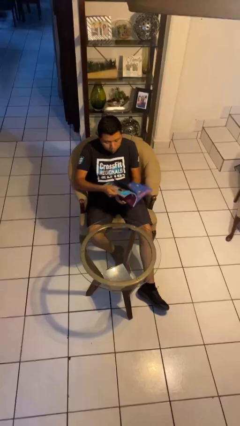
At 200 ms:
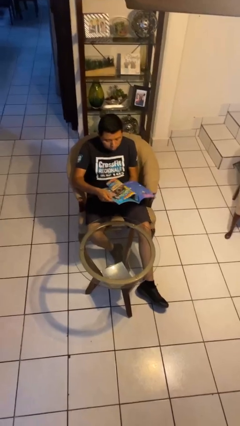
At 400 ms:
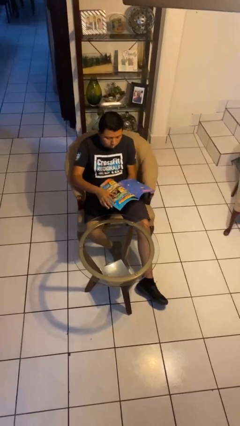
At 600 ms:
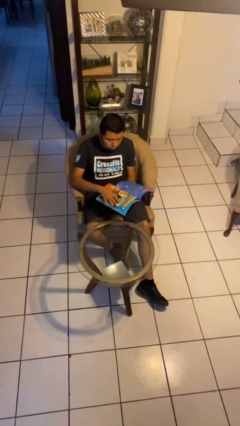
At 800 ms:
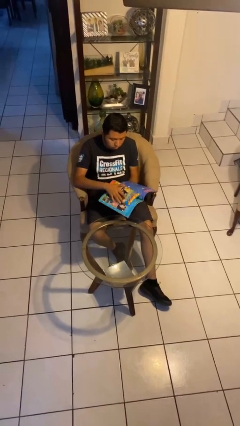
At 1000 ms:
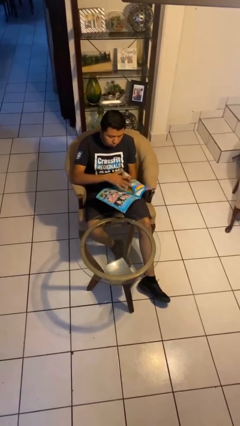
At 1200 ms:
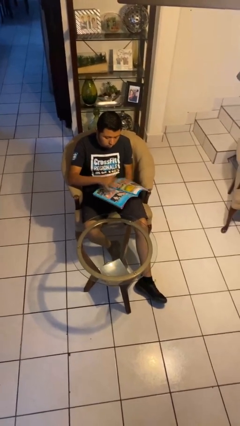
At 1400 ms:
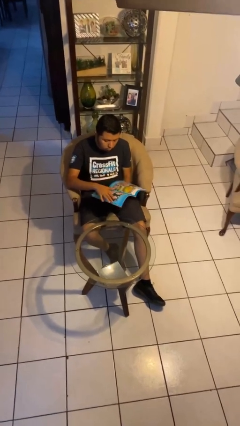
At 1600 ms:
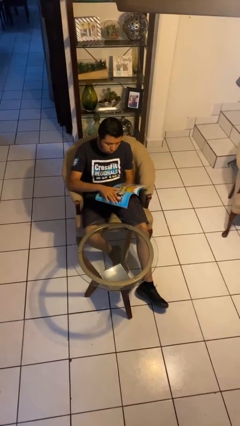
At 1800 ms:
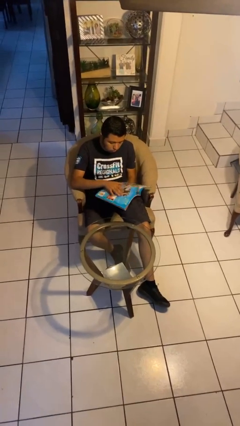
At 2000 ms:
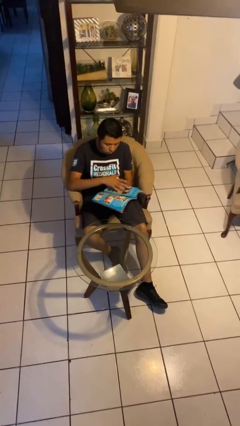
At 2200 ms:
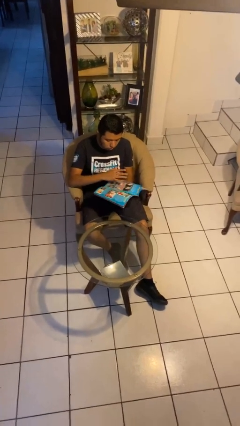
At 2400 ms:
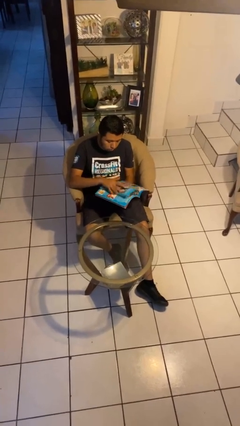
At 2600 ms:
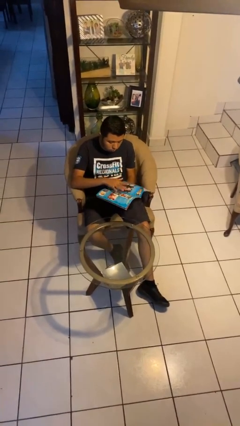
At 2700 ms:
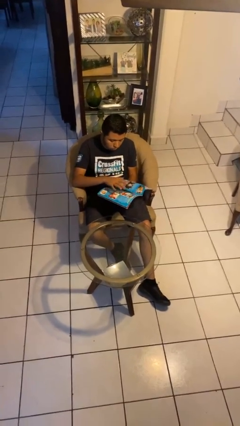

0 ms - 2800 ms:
person reads magazine

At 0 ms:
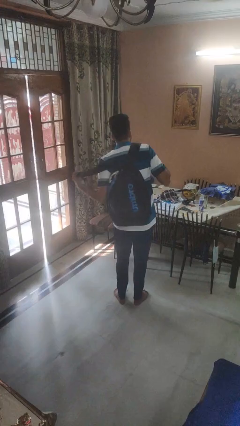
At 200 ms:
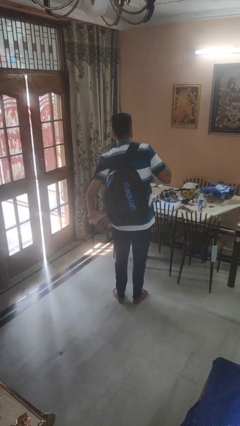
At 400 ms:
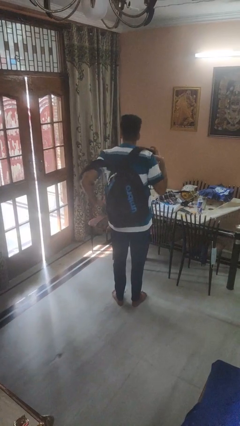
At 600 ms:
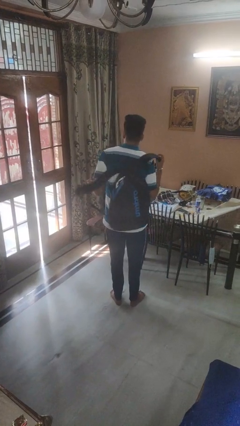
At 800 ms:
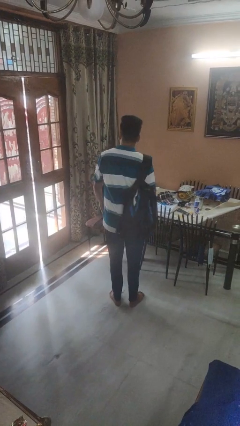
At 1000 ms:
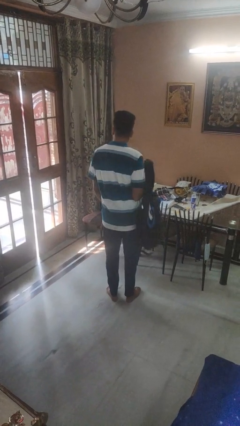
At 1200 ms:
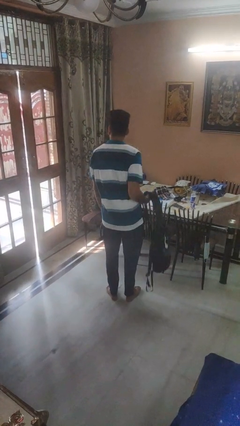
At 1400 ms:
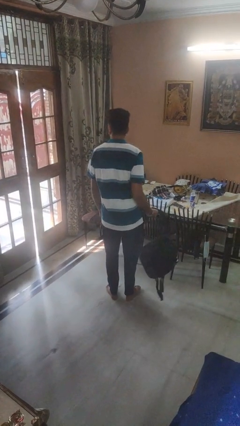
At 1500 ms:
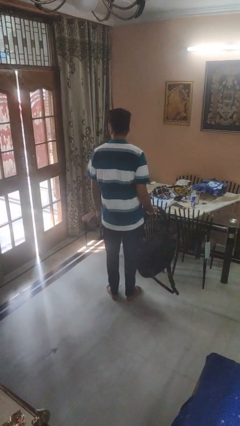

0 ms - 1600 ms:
person takes off backpack

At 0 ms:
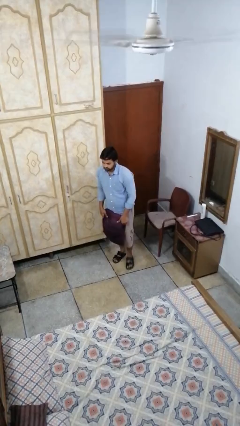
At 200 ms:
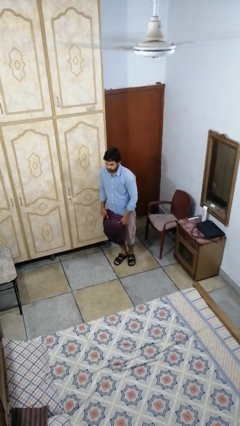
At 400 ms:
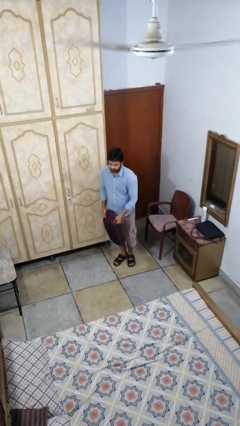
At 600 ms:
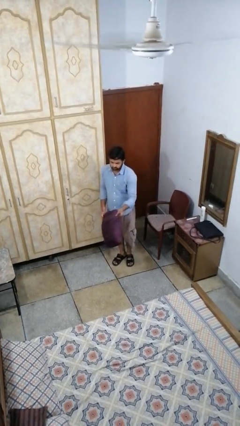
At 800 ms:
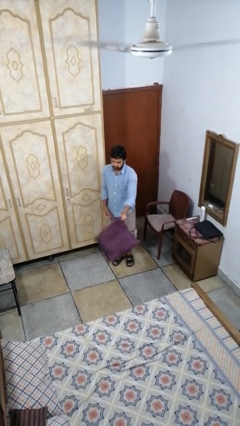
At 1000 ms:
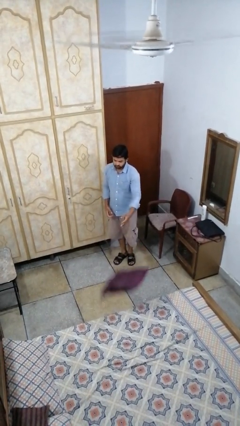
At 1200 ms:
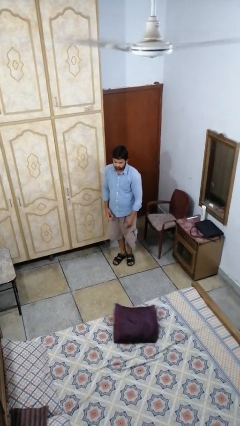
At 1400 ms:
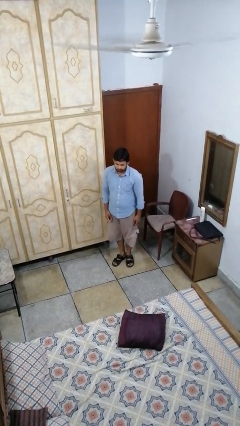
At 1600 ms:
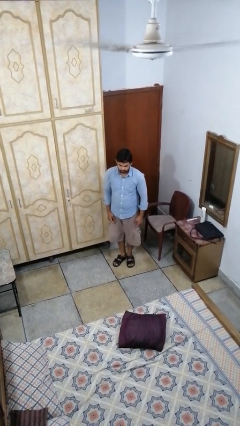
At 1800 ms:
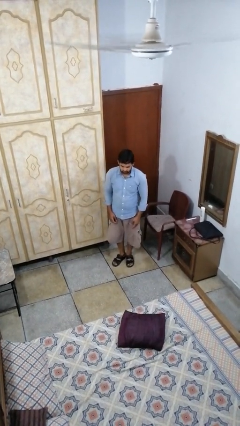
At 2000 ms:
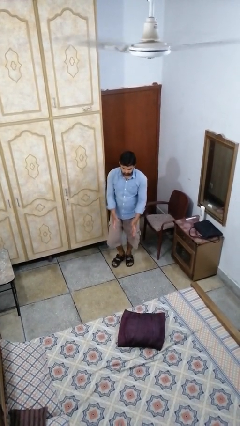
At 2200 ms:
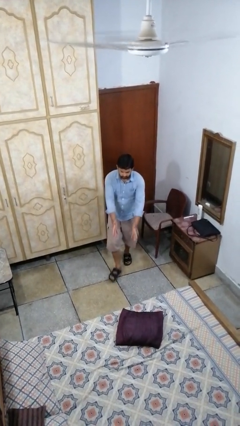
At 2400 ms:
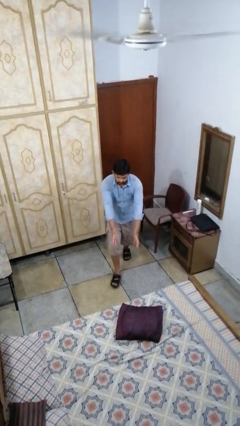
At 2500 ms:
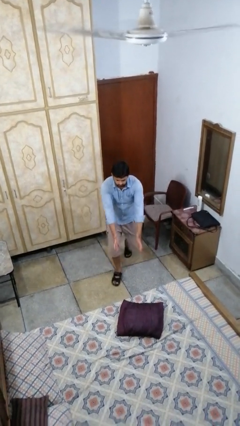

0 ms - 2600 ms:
person throws object on bed

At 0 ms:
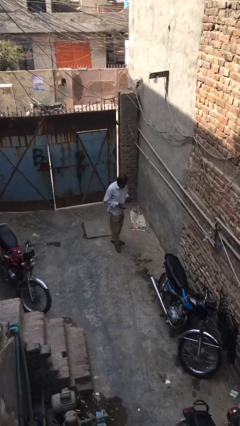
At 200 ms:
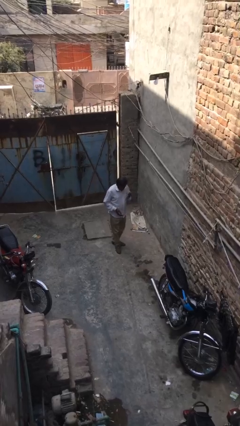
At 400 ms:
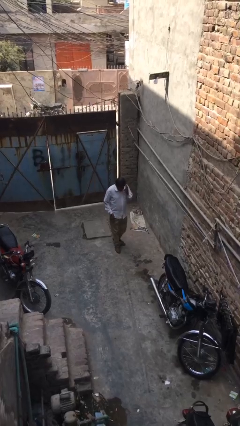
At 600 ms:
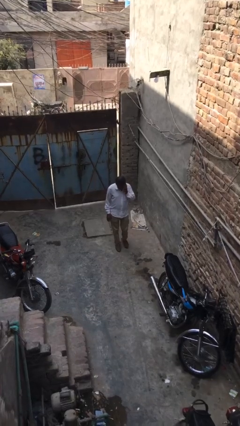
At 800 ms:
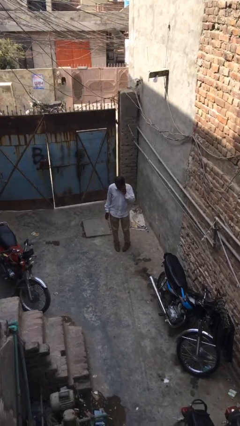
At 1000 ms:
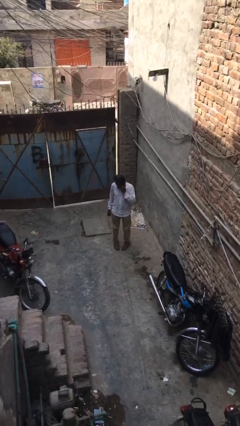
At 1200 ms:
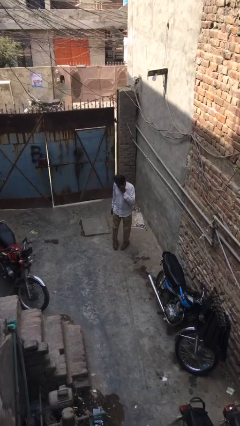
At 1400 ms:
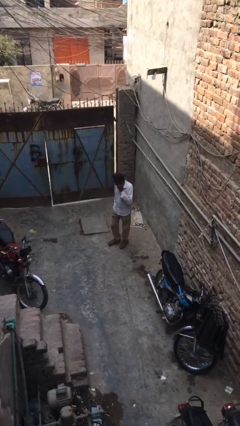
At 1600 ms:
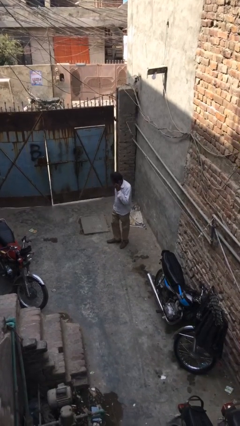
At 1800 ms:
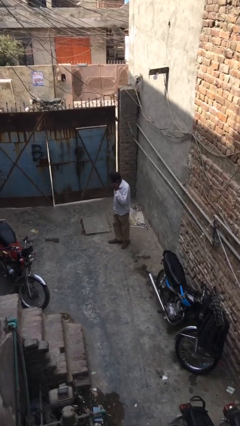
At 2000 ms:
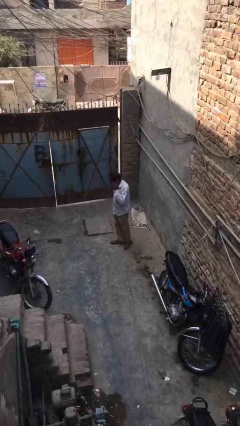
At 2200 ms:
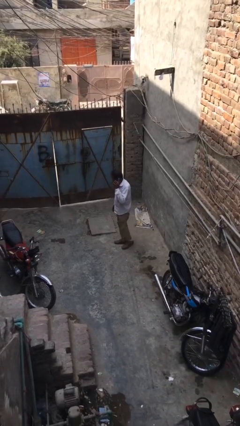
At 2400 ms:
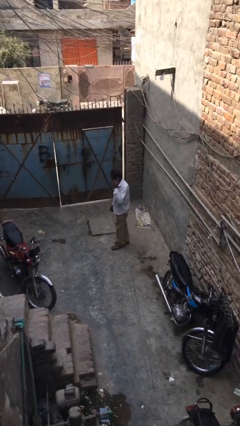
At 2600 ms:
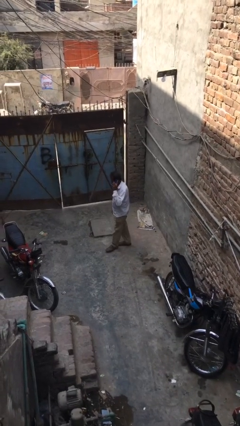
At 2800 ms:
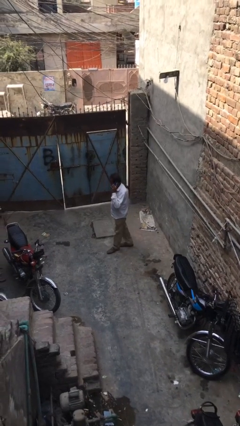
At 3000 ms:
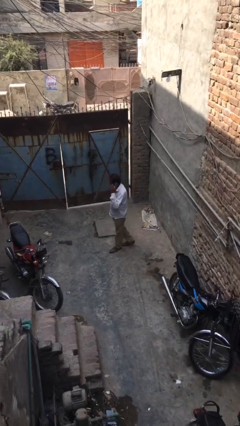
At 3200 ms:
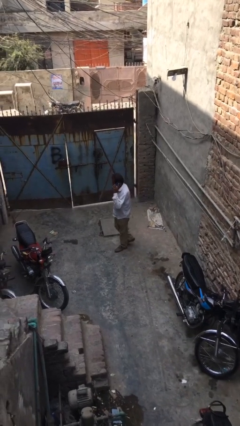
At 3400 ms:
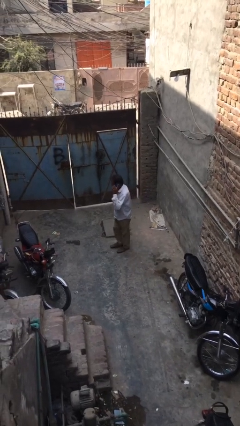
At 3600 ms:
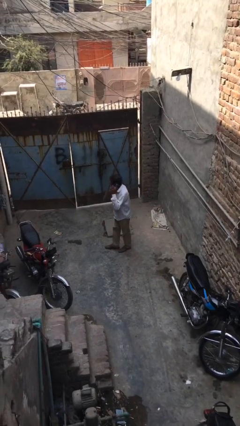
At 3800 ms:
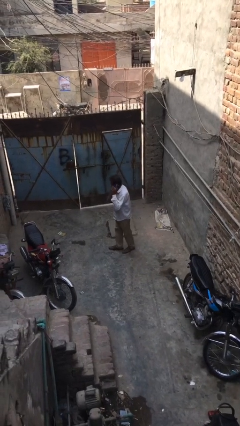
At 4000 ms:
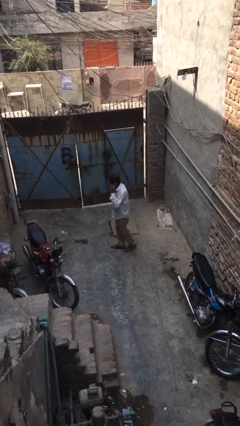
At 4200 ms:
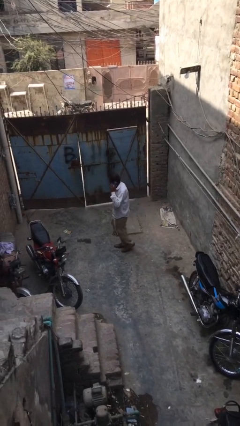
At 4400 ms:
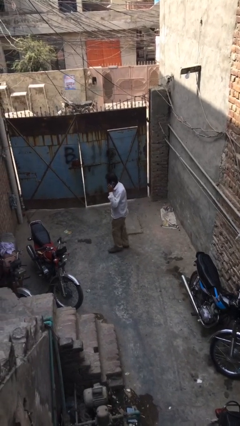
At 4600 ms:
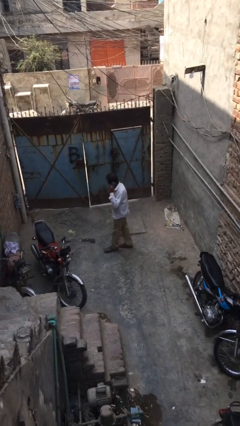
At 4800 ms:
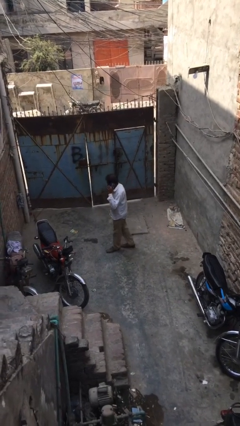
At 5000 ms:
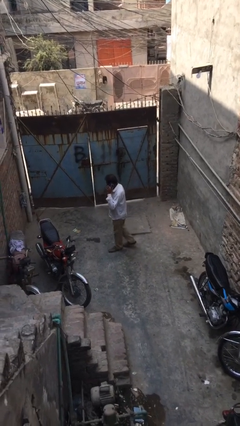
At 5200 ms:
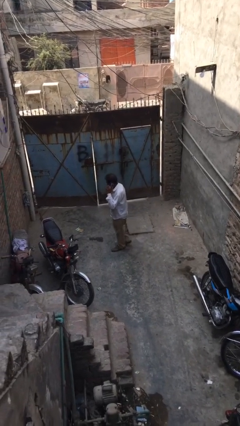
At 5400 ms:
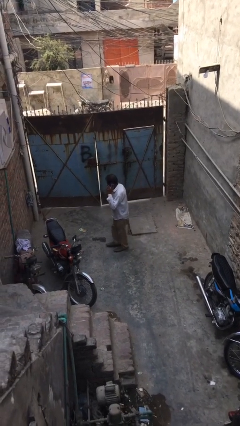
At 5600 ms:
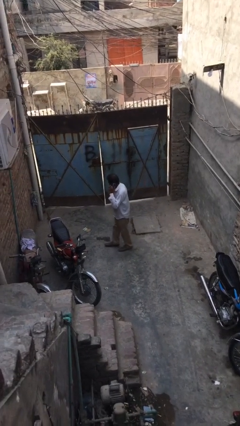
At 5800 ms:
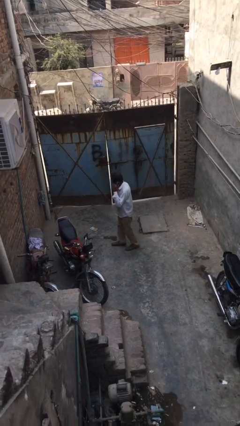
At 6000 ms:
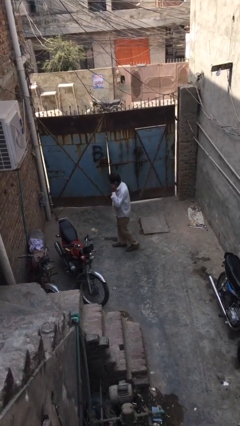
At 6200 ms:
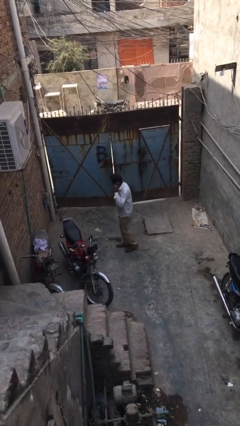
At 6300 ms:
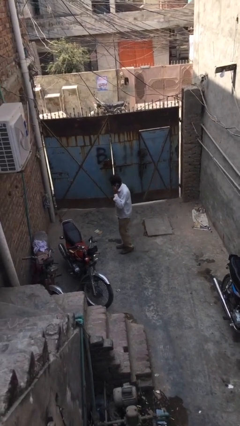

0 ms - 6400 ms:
person talks on phone

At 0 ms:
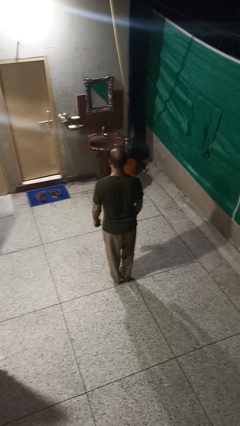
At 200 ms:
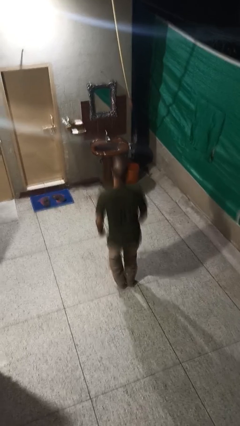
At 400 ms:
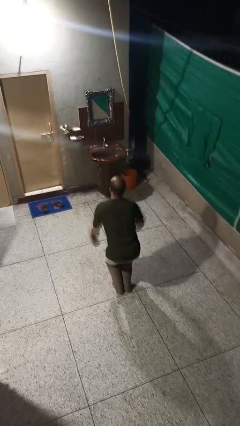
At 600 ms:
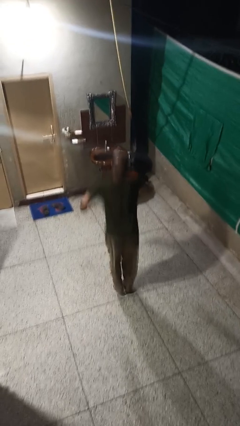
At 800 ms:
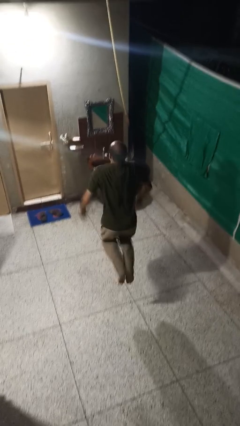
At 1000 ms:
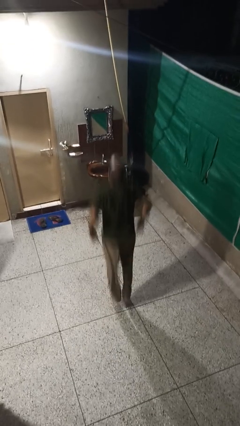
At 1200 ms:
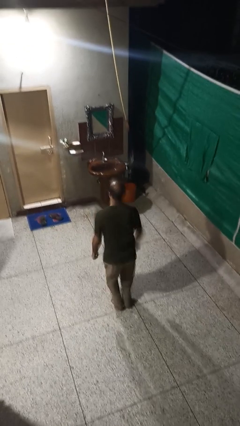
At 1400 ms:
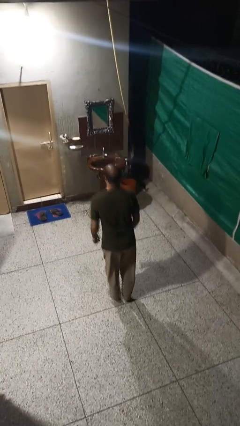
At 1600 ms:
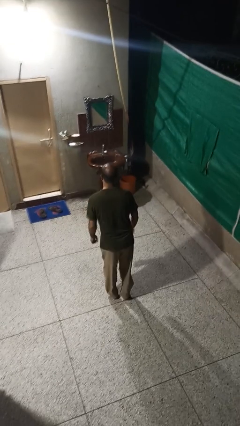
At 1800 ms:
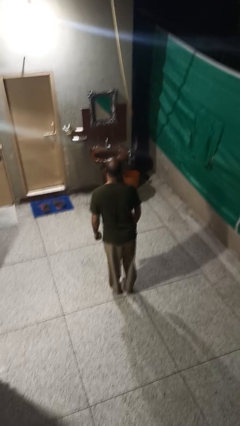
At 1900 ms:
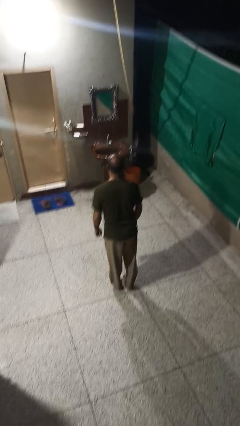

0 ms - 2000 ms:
person jumps

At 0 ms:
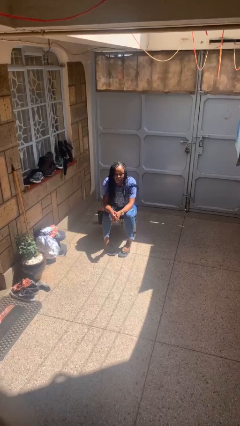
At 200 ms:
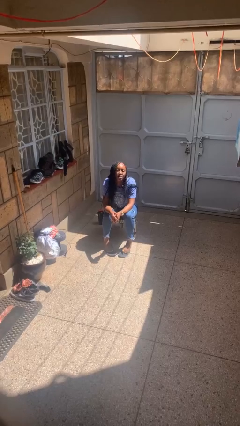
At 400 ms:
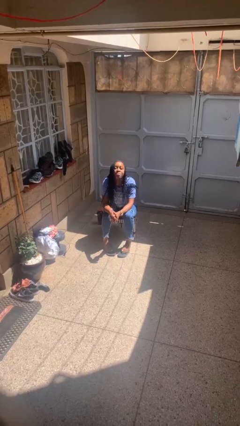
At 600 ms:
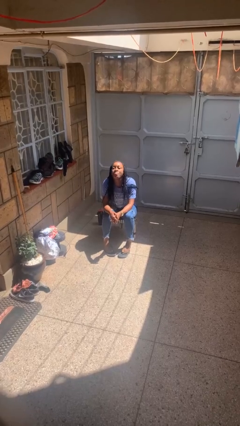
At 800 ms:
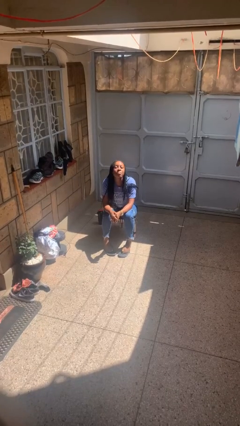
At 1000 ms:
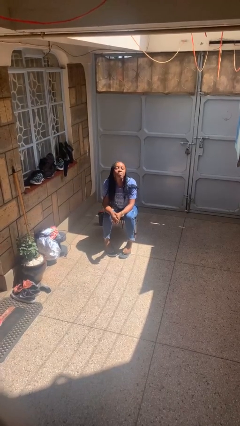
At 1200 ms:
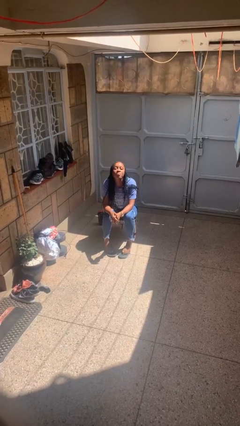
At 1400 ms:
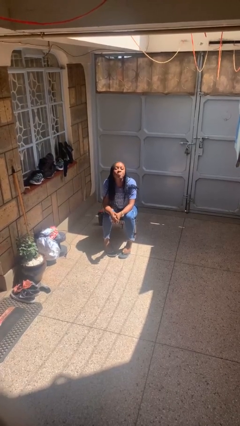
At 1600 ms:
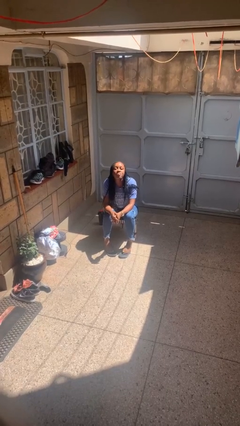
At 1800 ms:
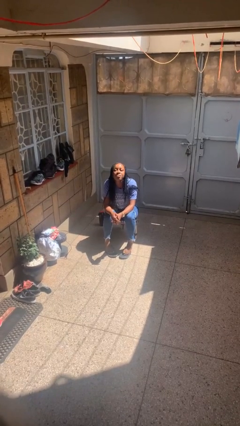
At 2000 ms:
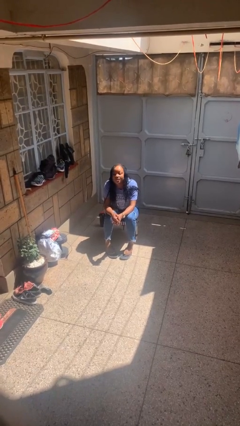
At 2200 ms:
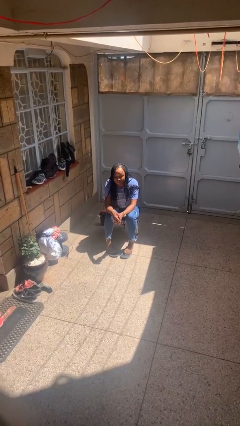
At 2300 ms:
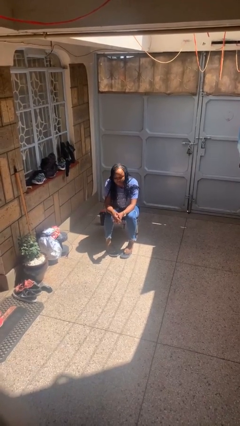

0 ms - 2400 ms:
person sticks out tongue
